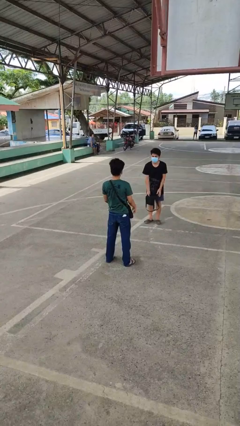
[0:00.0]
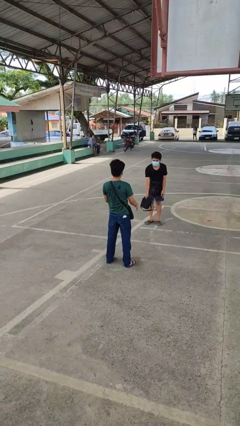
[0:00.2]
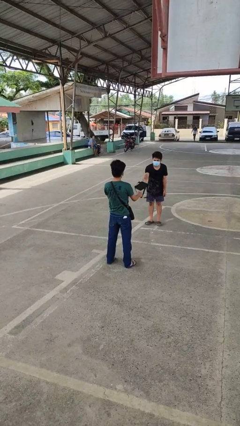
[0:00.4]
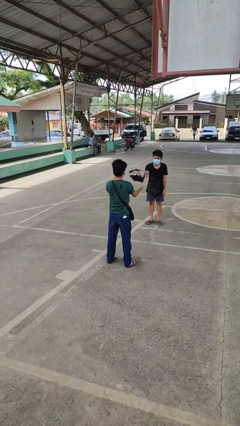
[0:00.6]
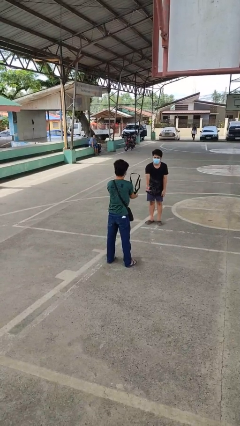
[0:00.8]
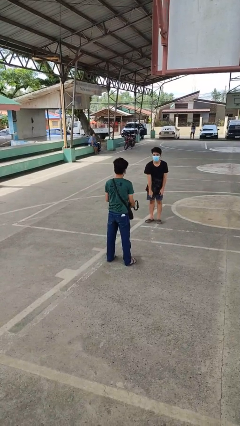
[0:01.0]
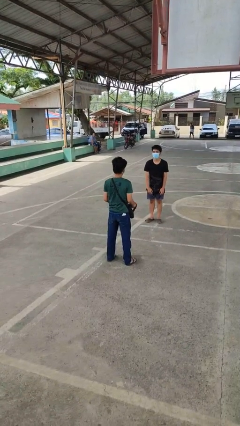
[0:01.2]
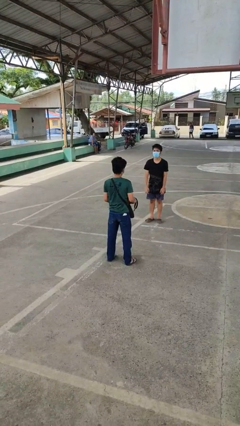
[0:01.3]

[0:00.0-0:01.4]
person catches object from person

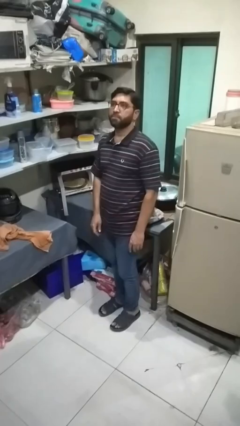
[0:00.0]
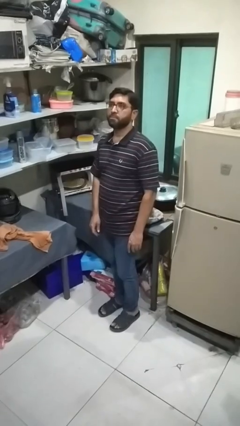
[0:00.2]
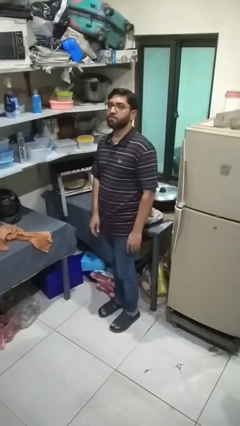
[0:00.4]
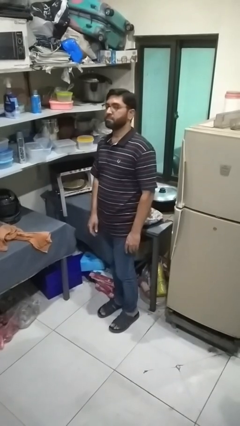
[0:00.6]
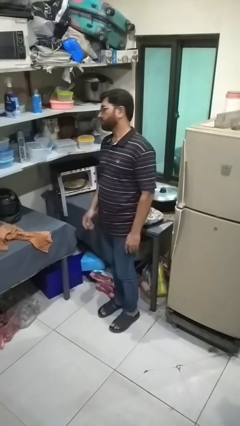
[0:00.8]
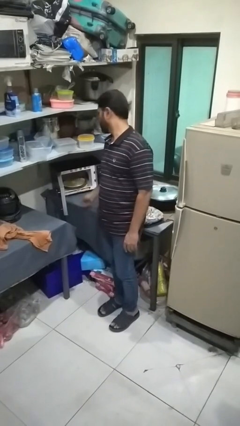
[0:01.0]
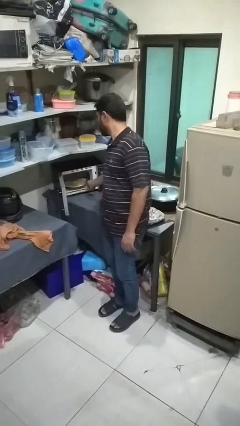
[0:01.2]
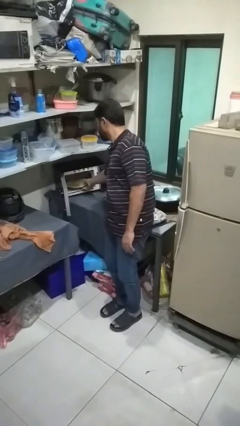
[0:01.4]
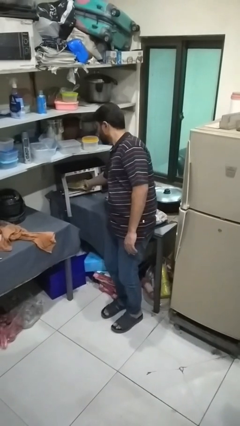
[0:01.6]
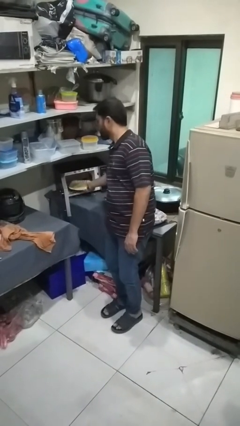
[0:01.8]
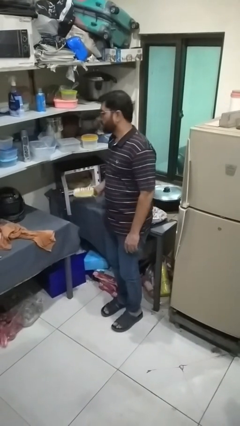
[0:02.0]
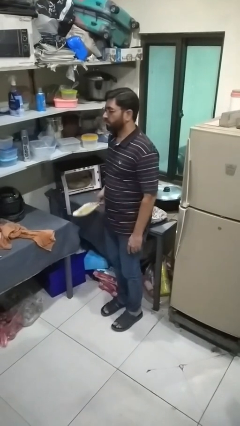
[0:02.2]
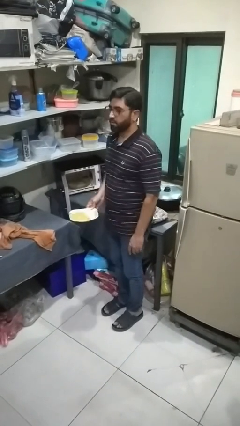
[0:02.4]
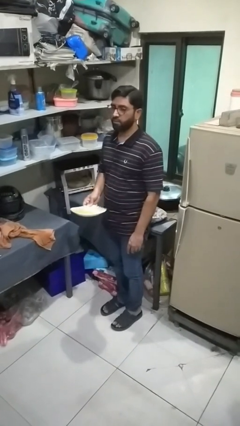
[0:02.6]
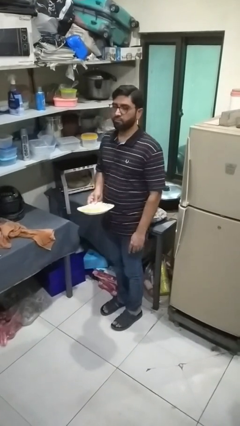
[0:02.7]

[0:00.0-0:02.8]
person takes object from microwave

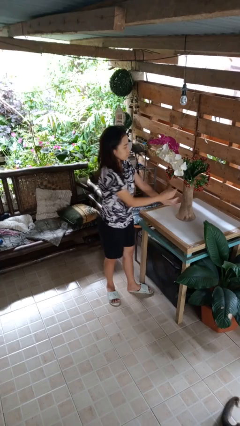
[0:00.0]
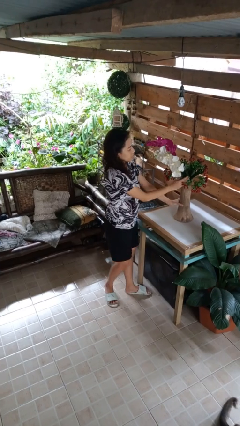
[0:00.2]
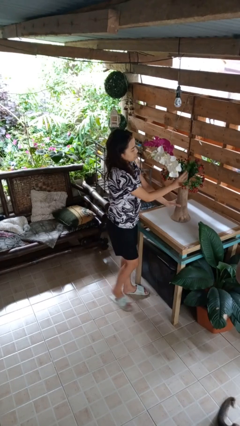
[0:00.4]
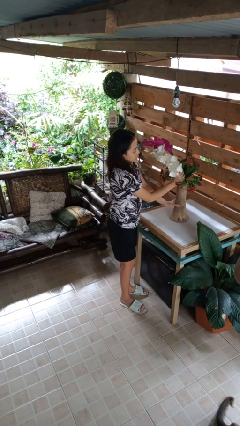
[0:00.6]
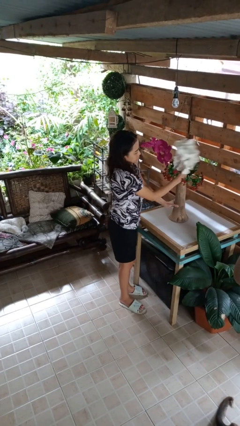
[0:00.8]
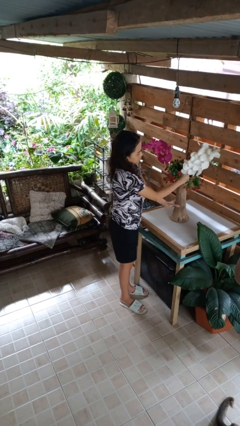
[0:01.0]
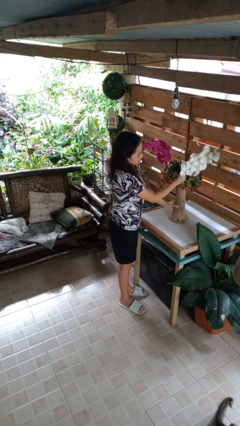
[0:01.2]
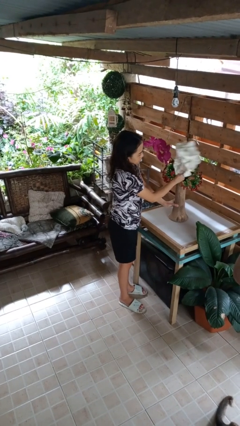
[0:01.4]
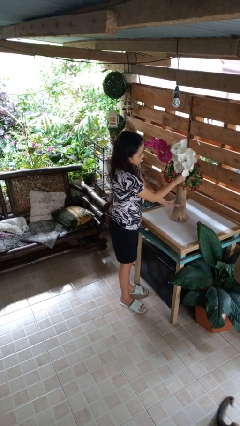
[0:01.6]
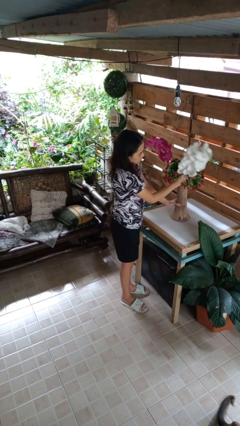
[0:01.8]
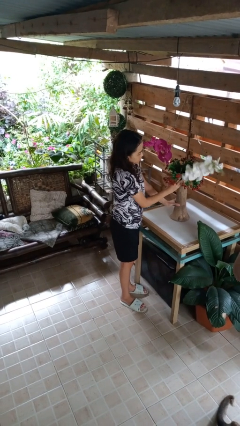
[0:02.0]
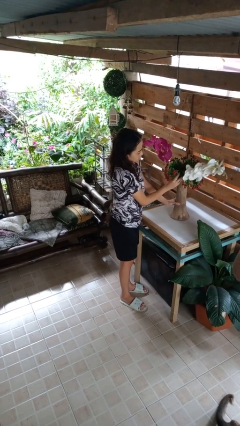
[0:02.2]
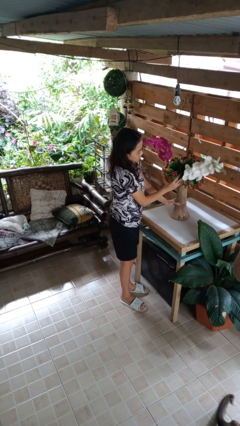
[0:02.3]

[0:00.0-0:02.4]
person arranges flowers in vase

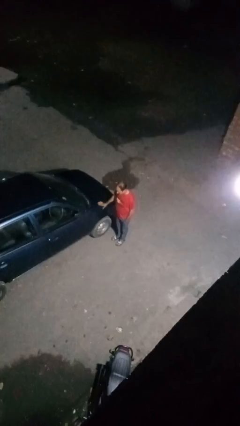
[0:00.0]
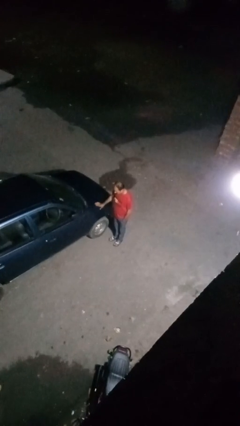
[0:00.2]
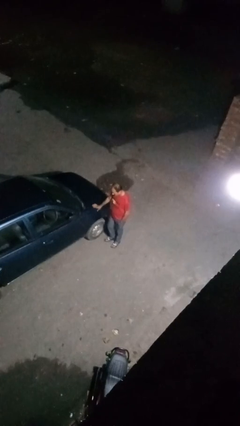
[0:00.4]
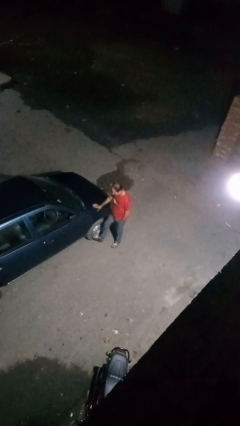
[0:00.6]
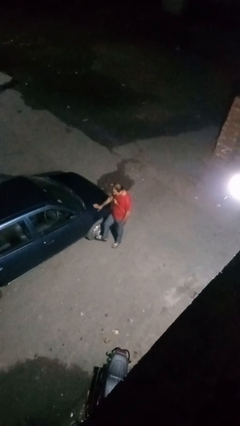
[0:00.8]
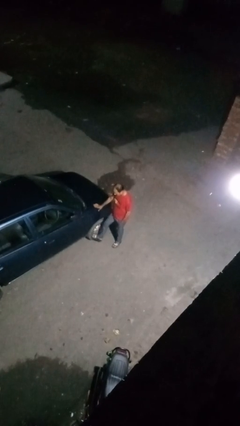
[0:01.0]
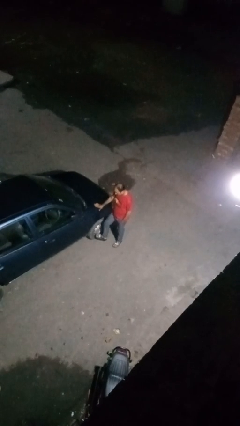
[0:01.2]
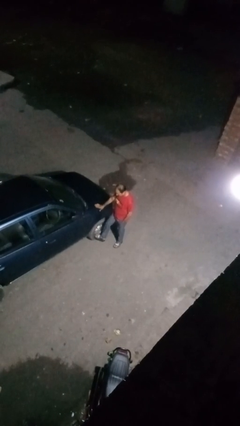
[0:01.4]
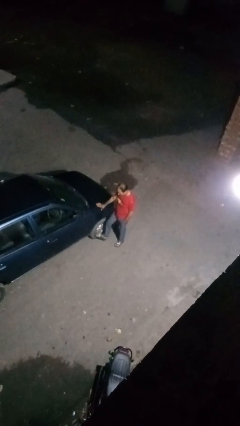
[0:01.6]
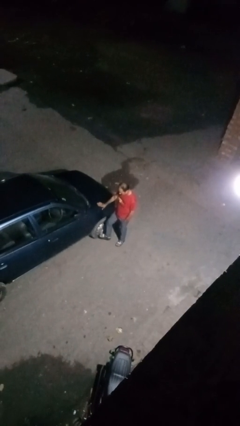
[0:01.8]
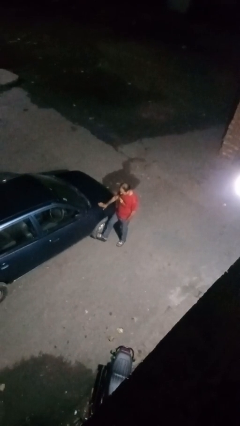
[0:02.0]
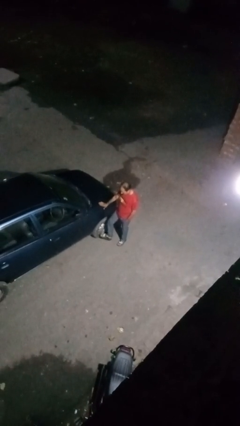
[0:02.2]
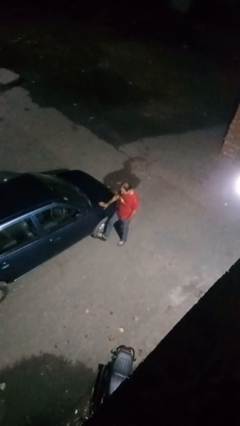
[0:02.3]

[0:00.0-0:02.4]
person kicks car tires

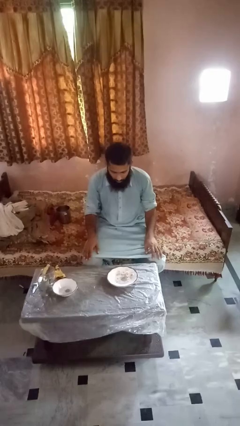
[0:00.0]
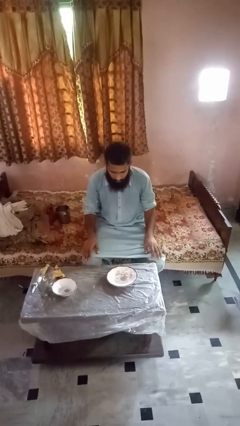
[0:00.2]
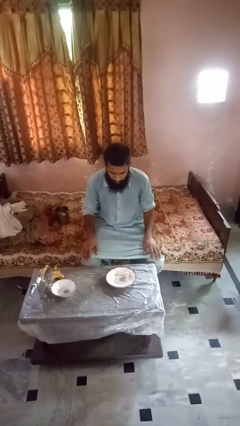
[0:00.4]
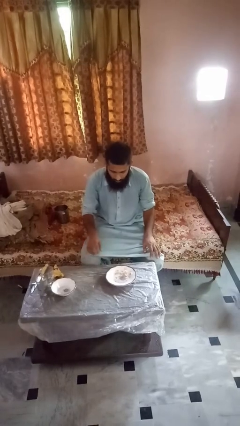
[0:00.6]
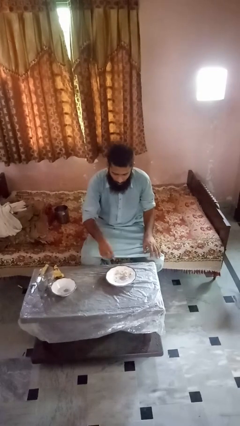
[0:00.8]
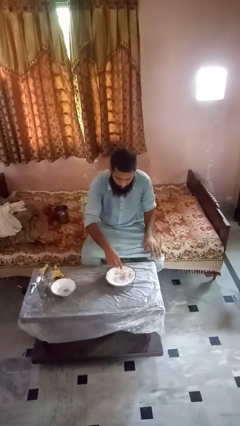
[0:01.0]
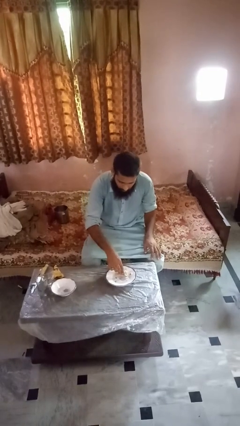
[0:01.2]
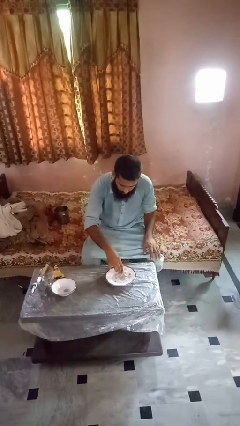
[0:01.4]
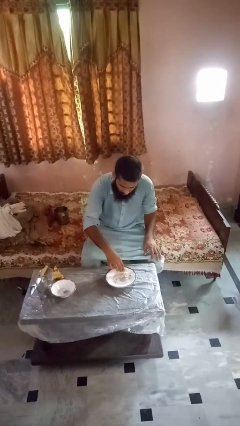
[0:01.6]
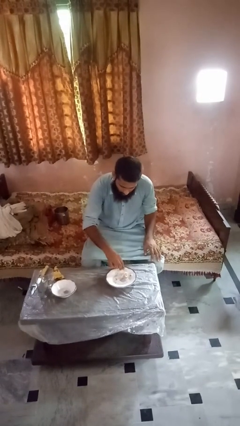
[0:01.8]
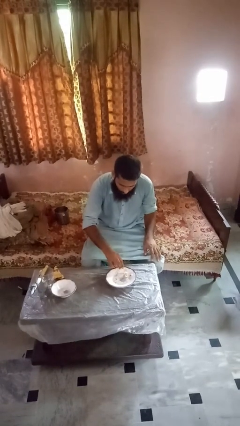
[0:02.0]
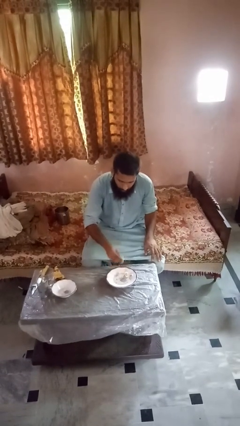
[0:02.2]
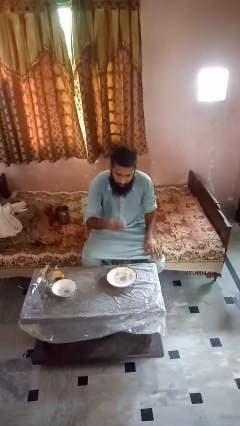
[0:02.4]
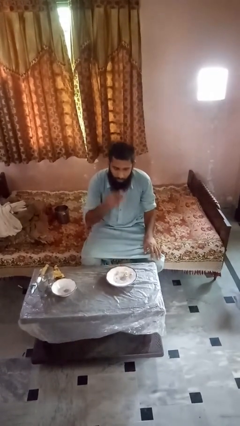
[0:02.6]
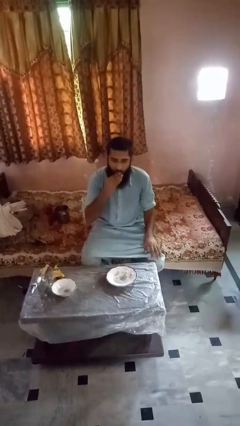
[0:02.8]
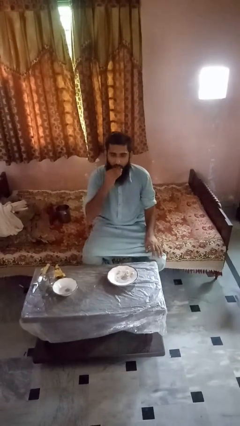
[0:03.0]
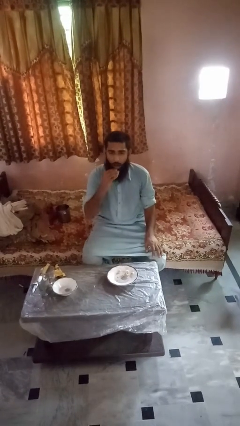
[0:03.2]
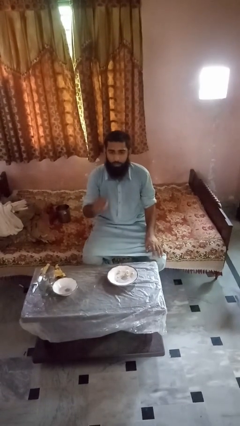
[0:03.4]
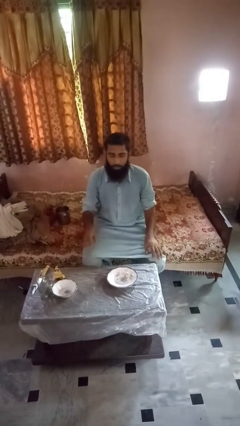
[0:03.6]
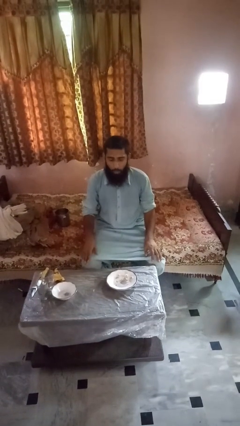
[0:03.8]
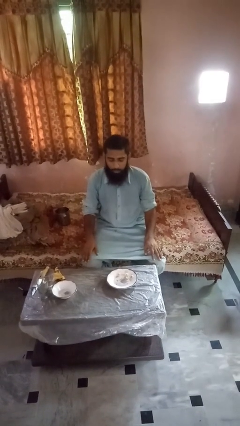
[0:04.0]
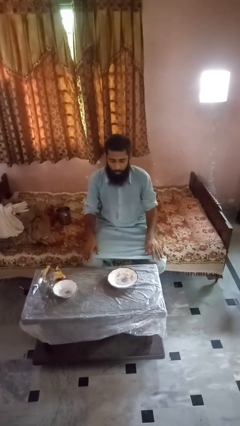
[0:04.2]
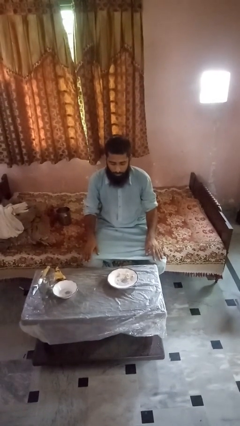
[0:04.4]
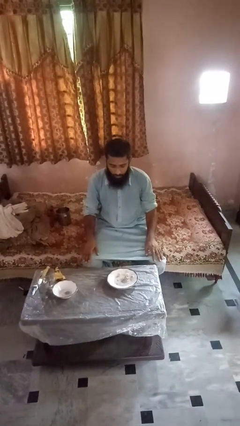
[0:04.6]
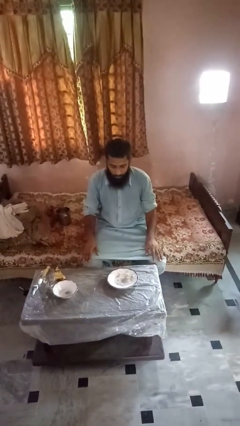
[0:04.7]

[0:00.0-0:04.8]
person eats with hands

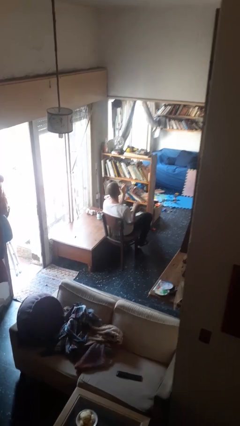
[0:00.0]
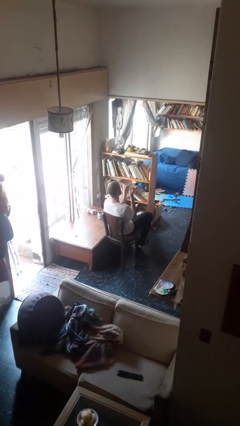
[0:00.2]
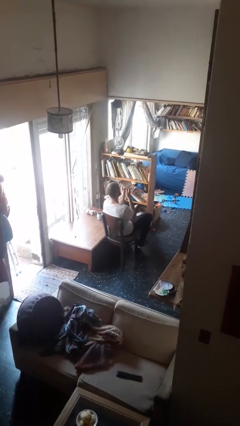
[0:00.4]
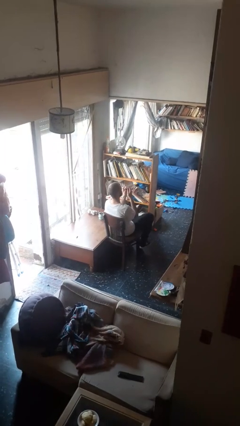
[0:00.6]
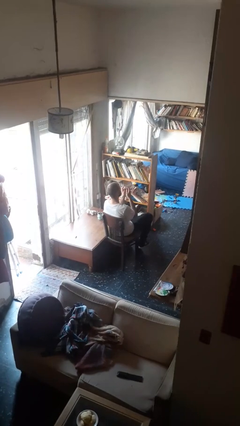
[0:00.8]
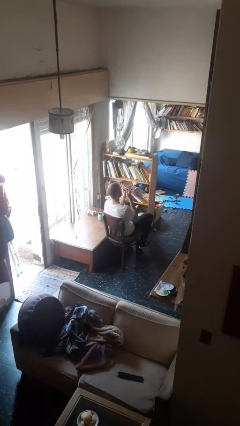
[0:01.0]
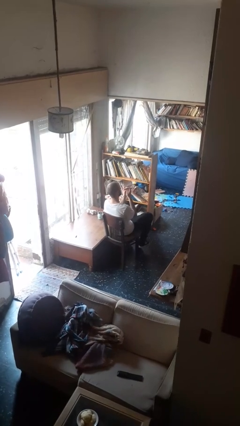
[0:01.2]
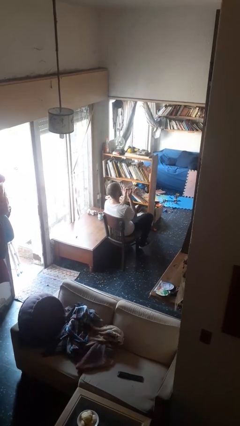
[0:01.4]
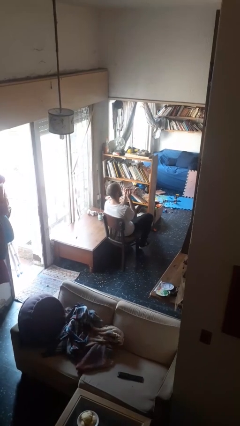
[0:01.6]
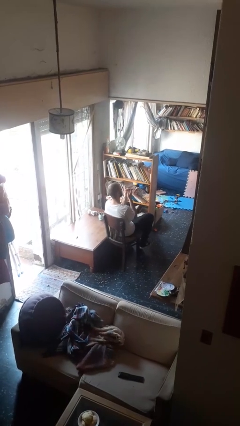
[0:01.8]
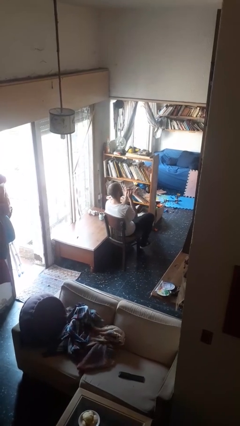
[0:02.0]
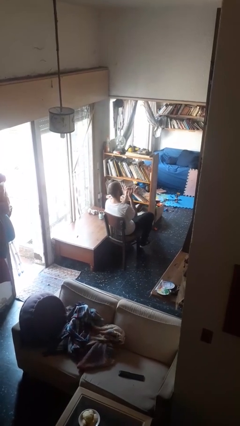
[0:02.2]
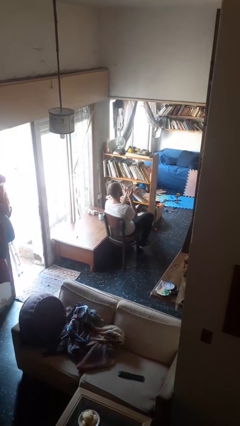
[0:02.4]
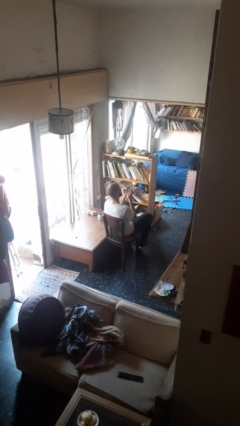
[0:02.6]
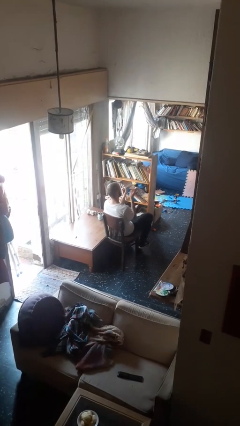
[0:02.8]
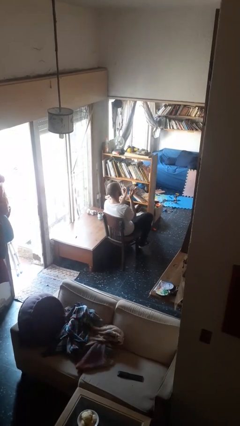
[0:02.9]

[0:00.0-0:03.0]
person files fingernails

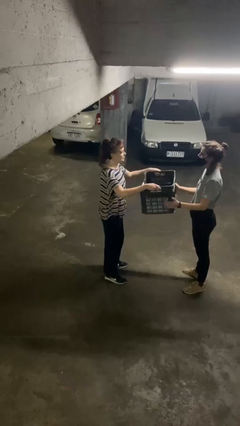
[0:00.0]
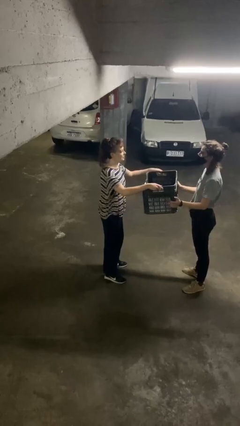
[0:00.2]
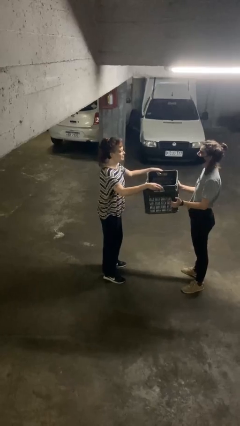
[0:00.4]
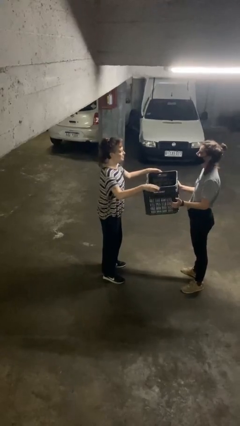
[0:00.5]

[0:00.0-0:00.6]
person transfers object to person
